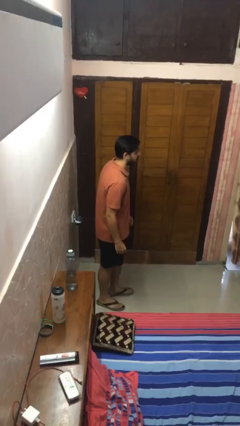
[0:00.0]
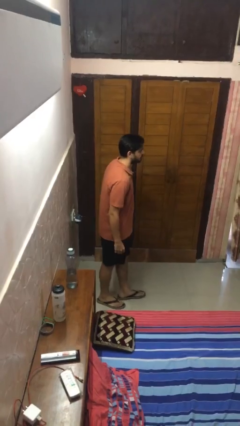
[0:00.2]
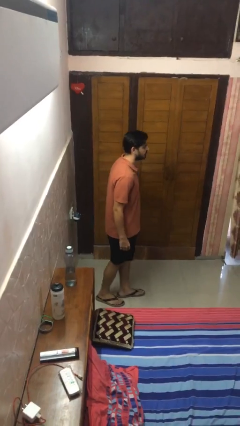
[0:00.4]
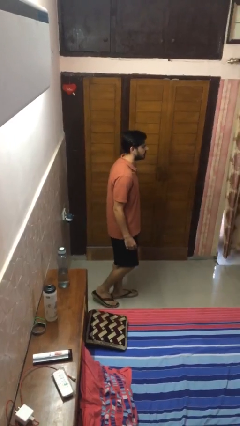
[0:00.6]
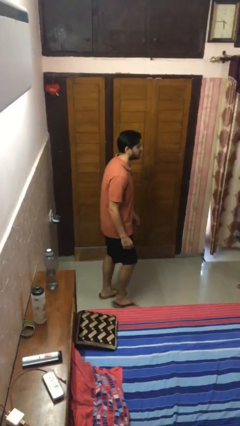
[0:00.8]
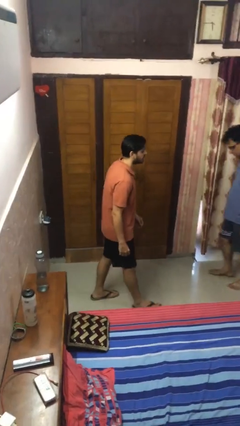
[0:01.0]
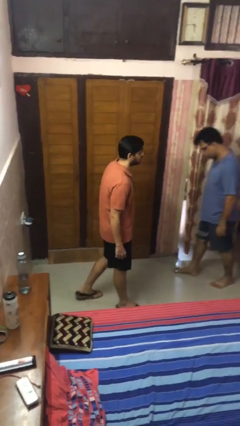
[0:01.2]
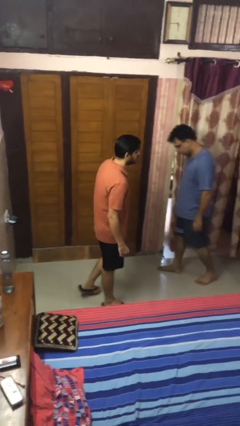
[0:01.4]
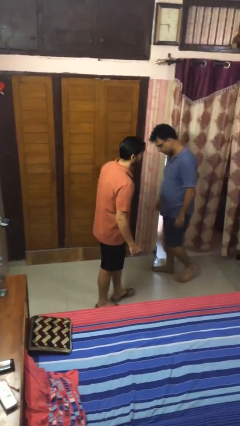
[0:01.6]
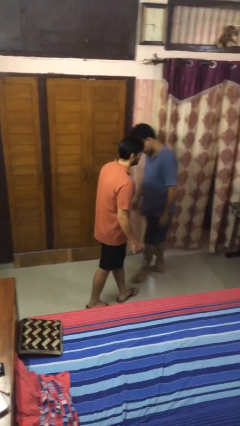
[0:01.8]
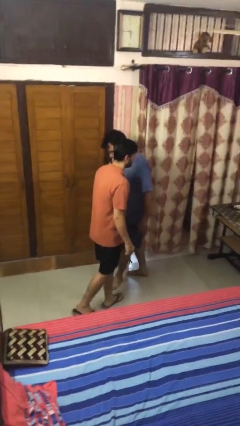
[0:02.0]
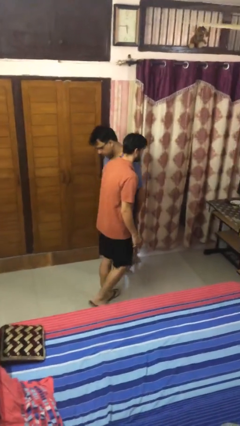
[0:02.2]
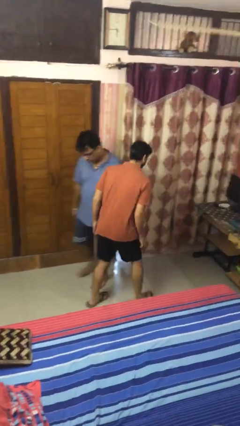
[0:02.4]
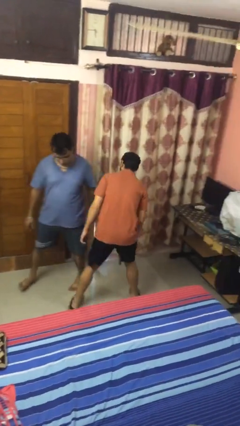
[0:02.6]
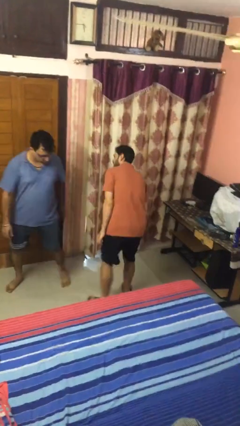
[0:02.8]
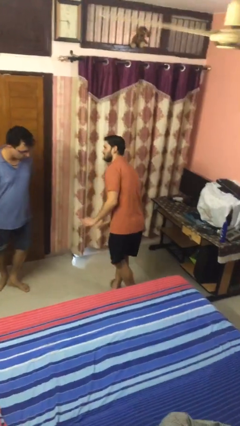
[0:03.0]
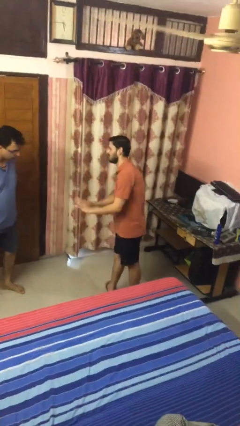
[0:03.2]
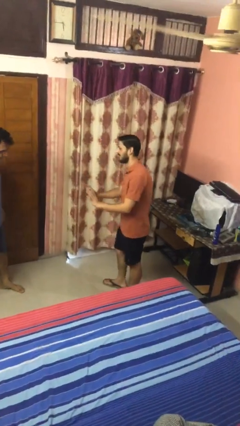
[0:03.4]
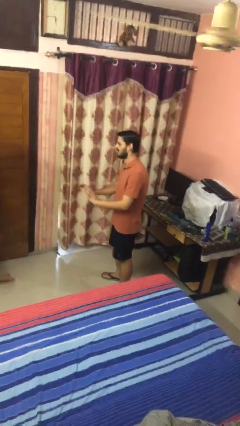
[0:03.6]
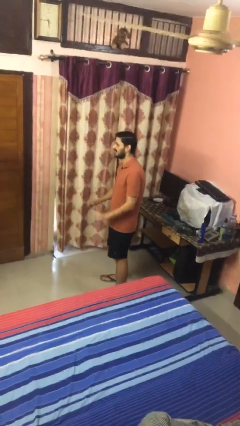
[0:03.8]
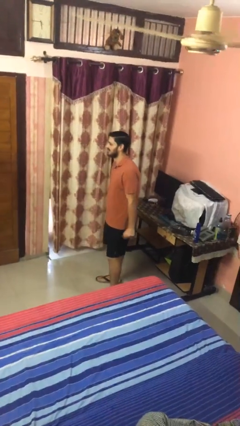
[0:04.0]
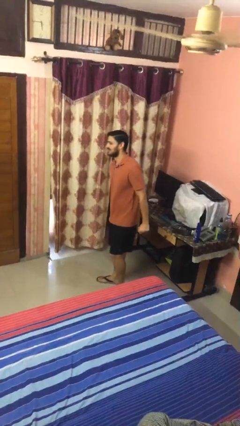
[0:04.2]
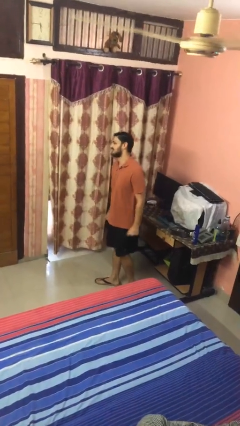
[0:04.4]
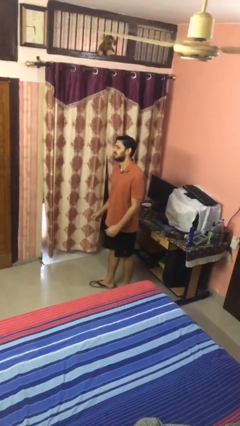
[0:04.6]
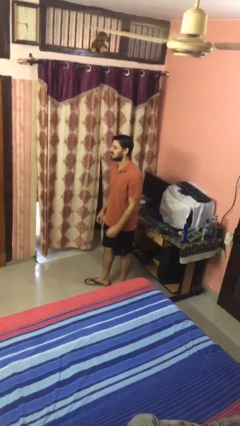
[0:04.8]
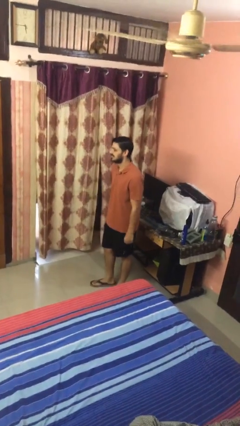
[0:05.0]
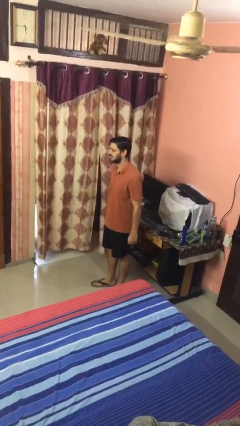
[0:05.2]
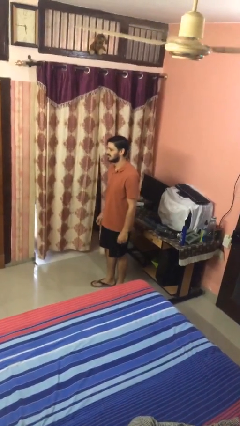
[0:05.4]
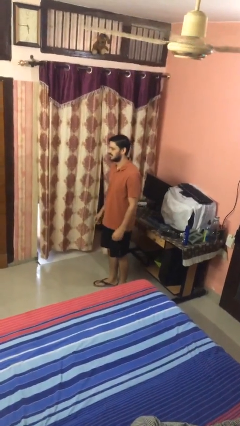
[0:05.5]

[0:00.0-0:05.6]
person bumps into person

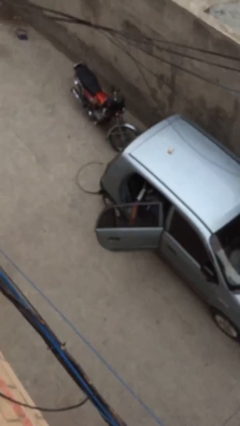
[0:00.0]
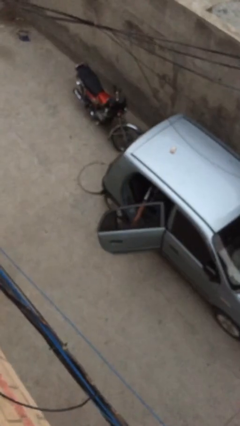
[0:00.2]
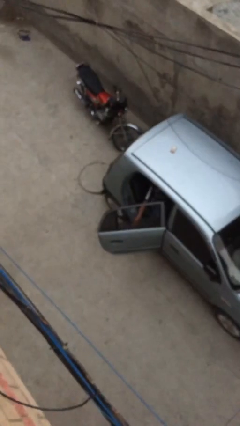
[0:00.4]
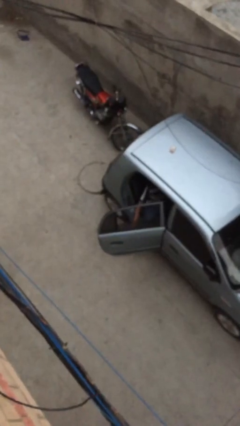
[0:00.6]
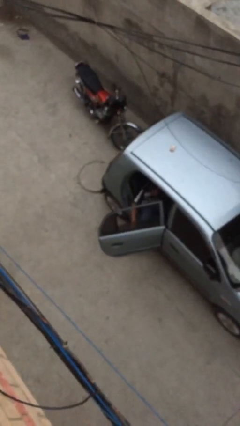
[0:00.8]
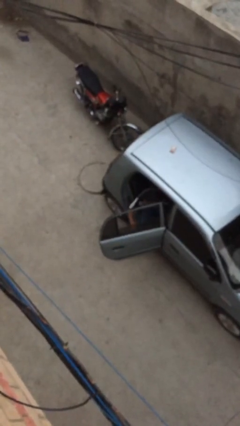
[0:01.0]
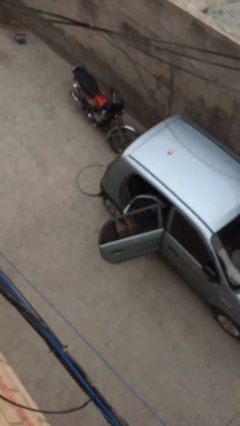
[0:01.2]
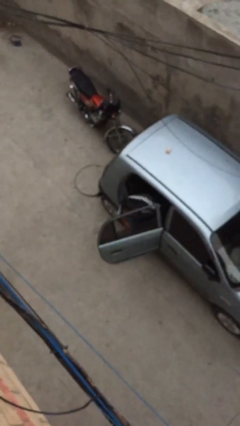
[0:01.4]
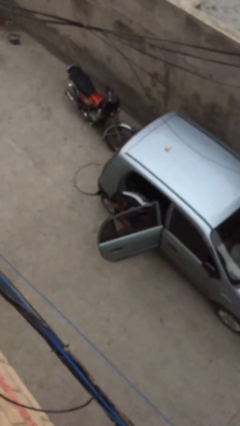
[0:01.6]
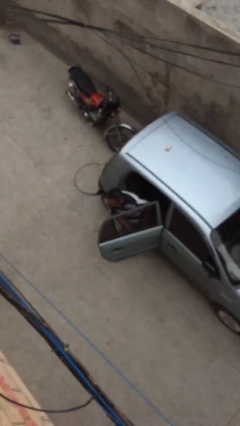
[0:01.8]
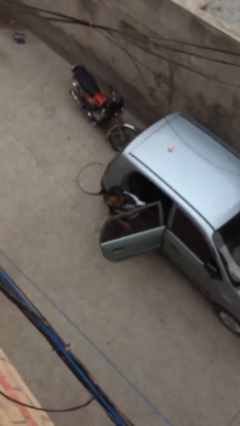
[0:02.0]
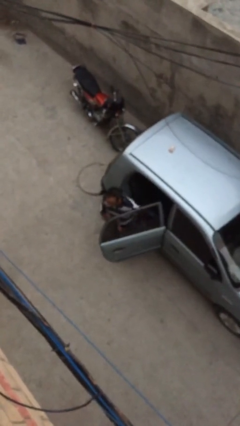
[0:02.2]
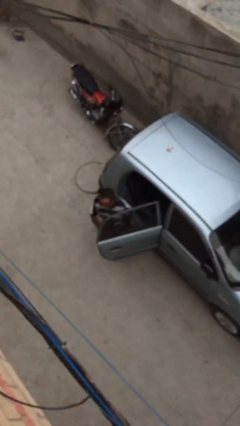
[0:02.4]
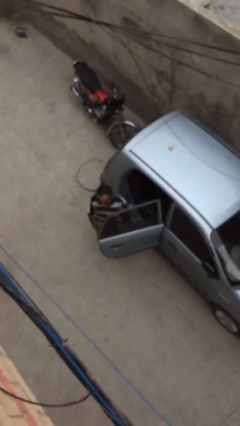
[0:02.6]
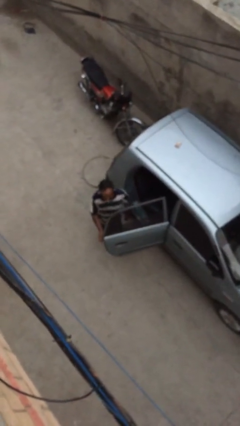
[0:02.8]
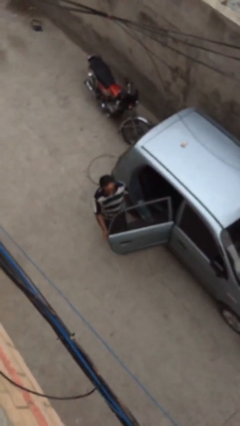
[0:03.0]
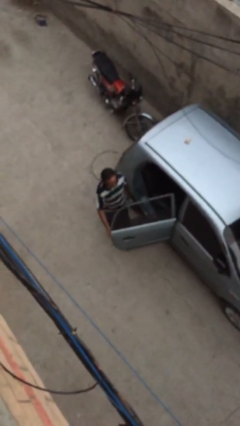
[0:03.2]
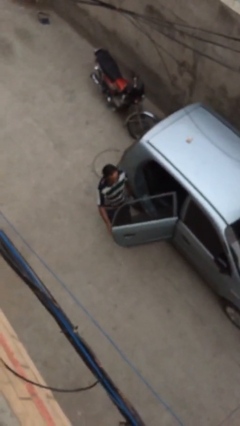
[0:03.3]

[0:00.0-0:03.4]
person exits car

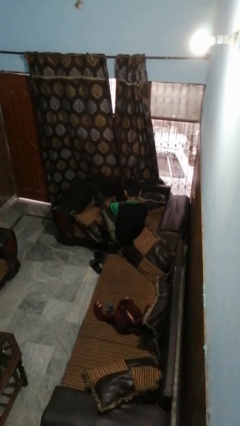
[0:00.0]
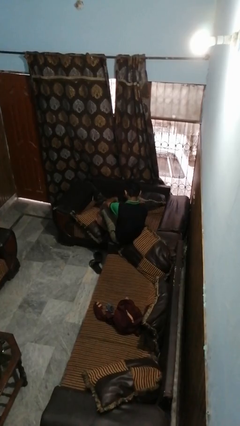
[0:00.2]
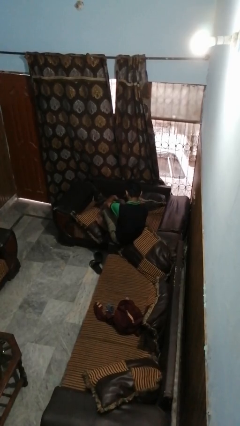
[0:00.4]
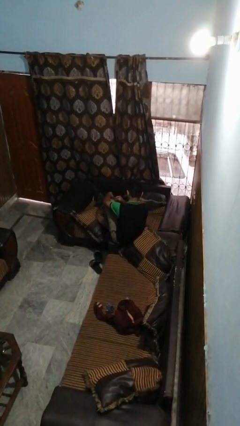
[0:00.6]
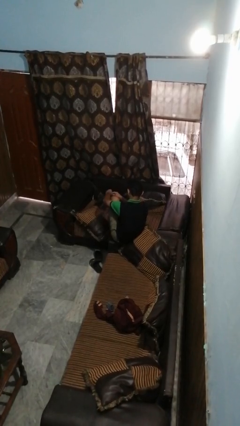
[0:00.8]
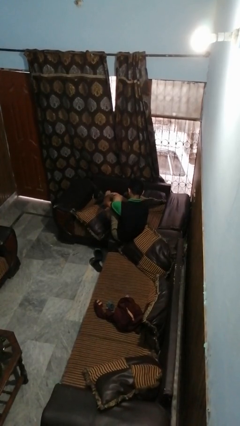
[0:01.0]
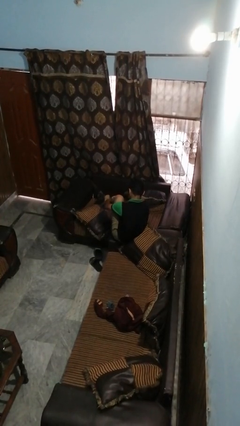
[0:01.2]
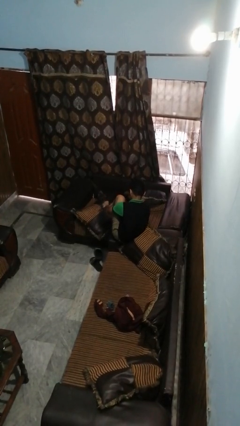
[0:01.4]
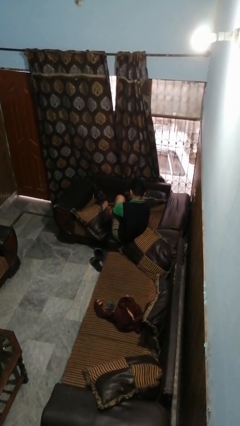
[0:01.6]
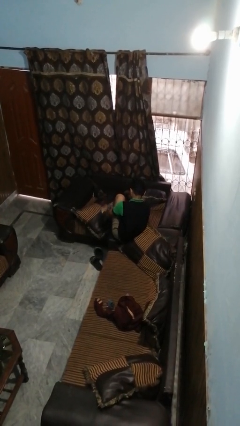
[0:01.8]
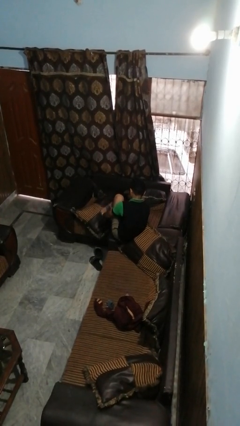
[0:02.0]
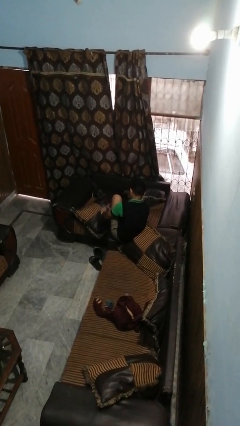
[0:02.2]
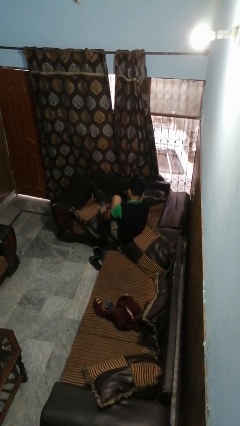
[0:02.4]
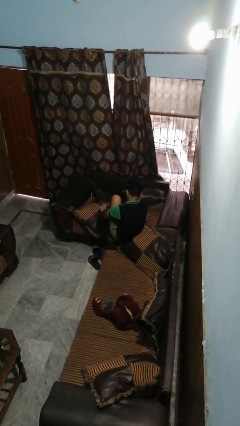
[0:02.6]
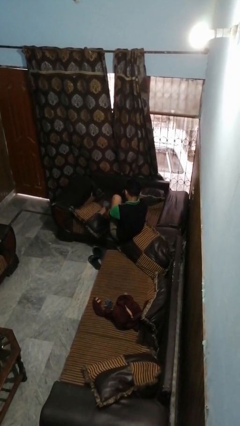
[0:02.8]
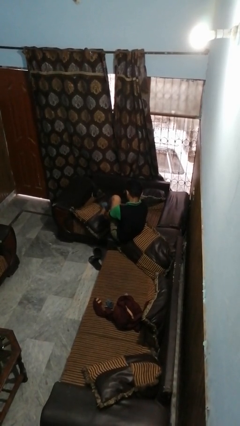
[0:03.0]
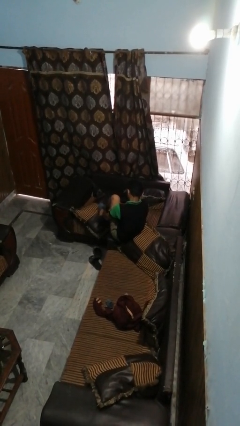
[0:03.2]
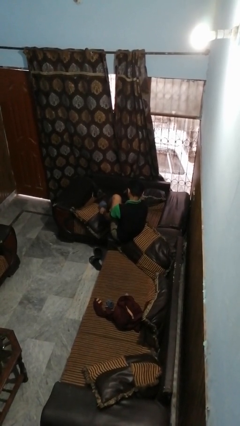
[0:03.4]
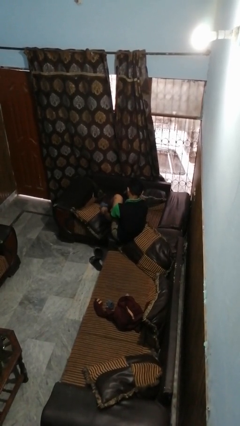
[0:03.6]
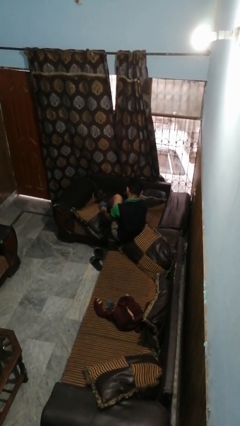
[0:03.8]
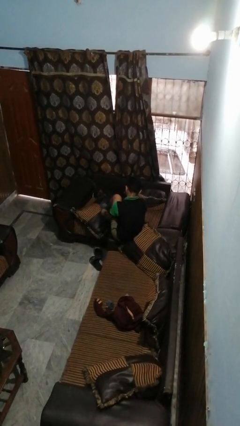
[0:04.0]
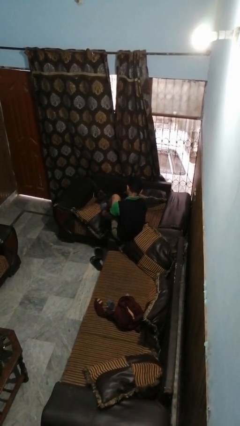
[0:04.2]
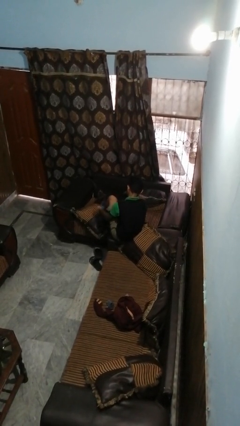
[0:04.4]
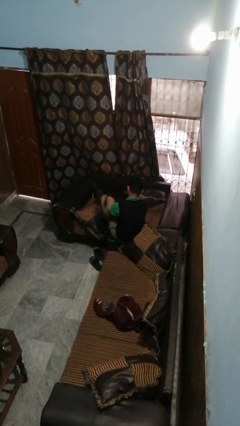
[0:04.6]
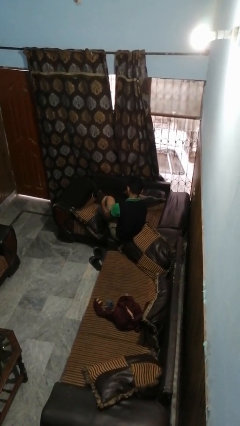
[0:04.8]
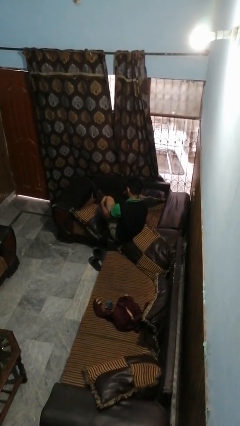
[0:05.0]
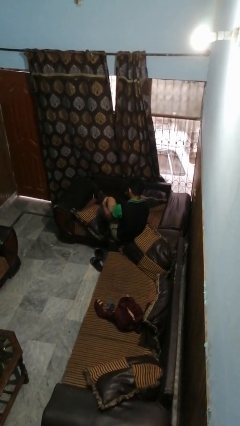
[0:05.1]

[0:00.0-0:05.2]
person puts on socks

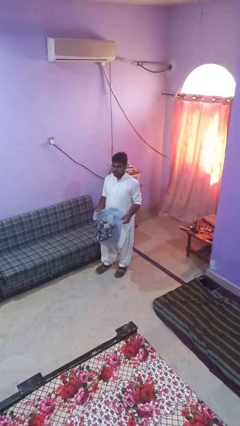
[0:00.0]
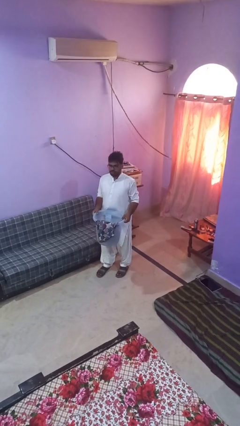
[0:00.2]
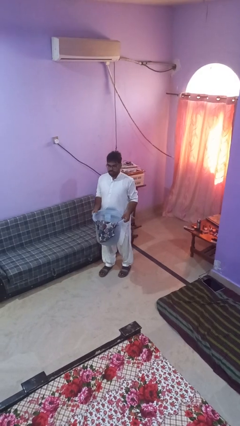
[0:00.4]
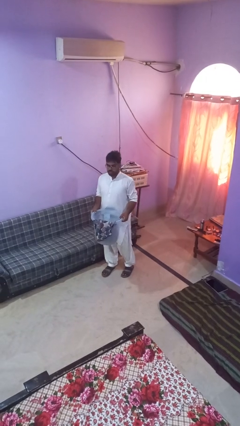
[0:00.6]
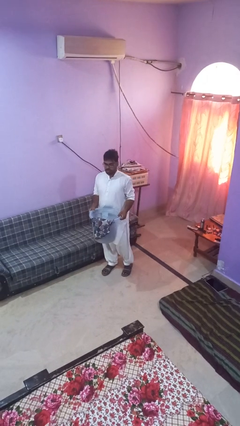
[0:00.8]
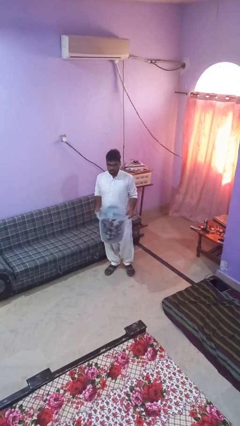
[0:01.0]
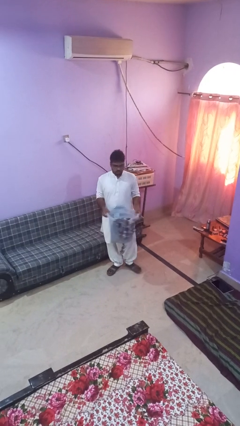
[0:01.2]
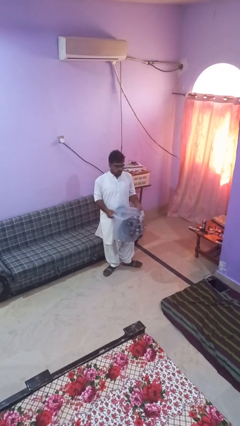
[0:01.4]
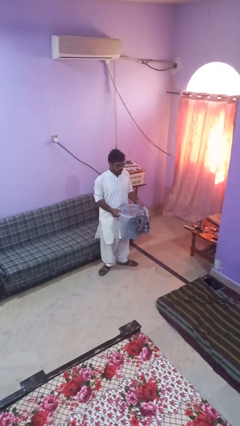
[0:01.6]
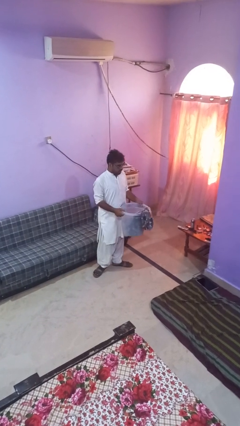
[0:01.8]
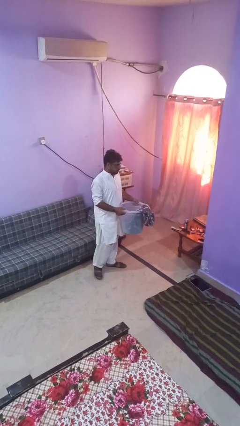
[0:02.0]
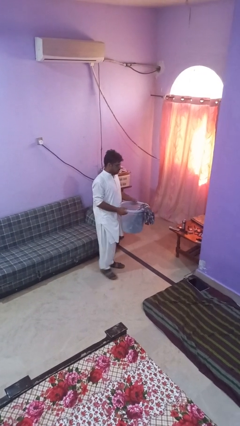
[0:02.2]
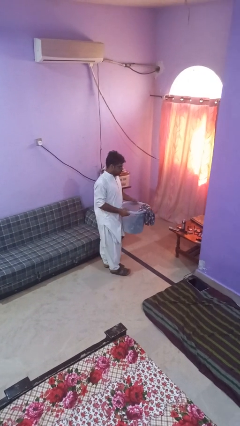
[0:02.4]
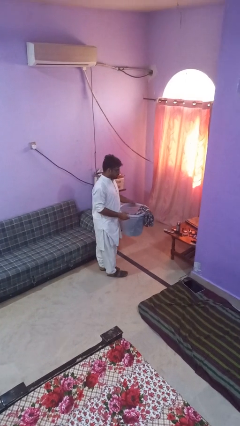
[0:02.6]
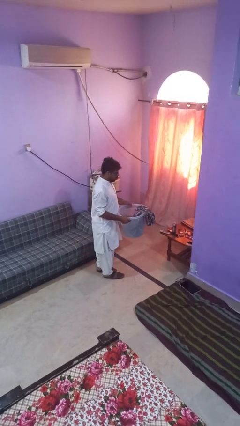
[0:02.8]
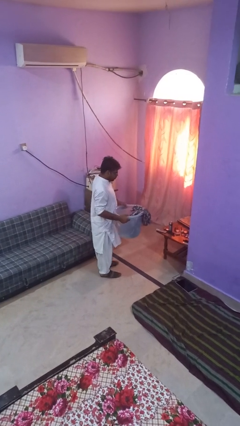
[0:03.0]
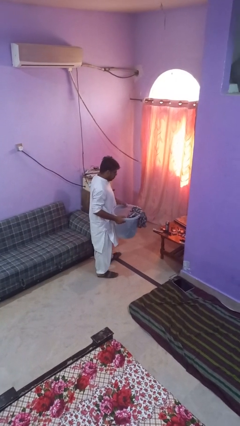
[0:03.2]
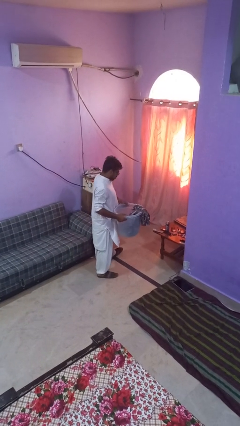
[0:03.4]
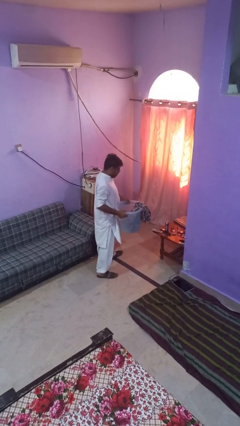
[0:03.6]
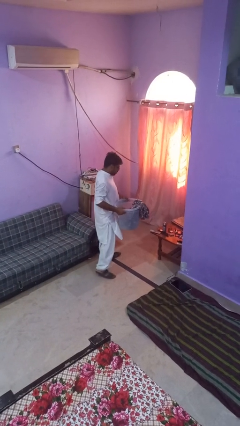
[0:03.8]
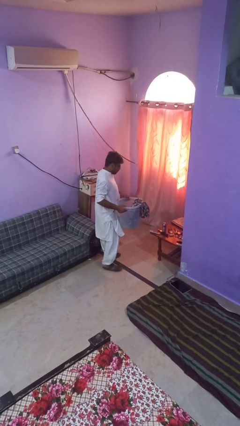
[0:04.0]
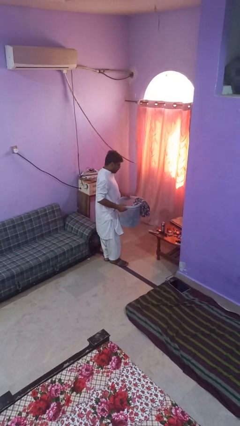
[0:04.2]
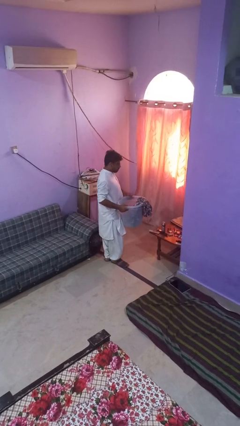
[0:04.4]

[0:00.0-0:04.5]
person carries laundry basket
